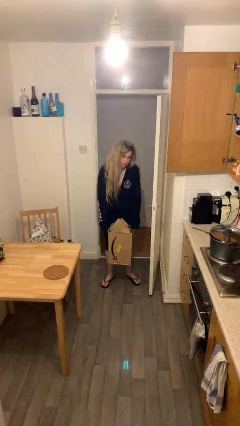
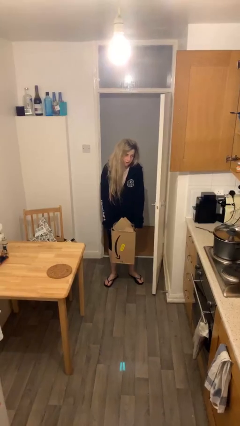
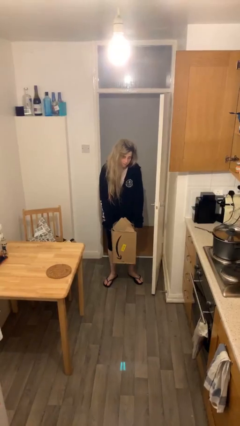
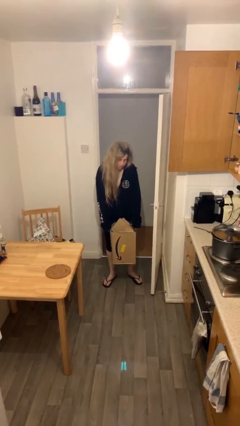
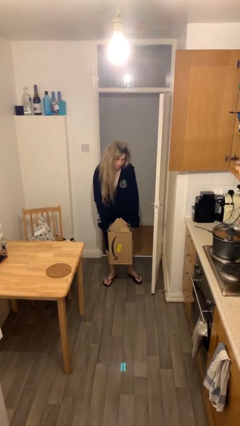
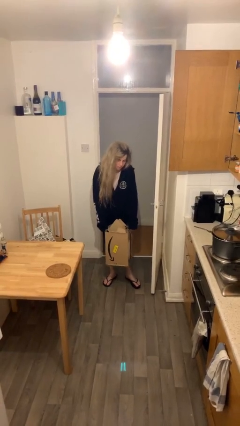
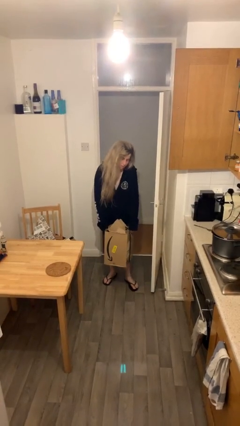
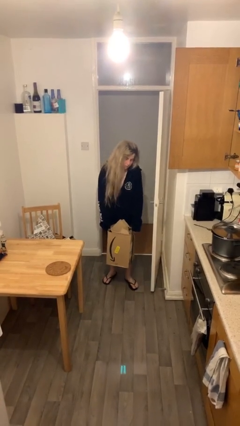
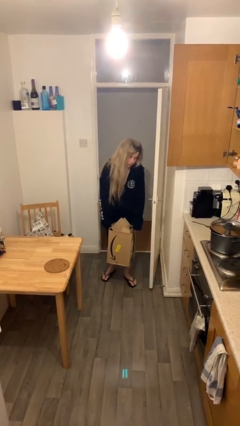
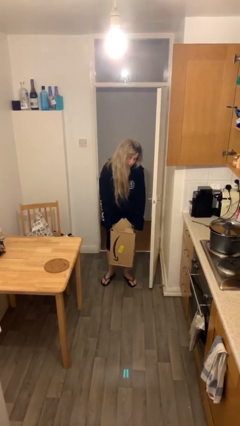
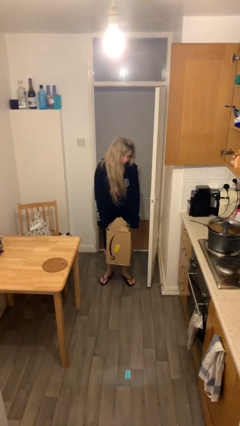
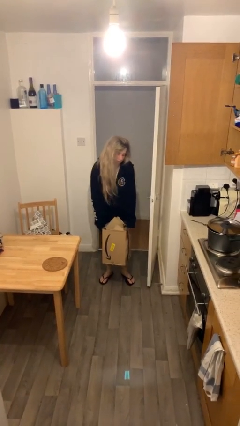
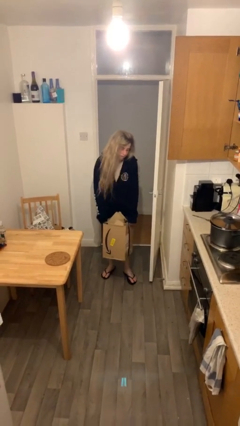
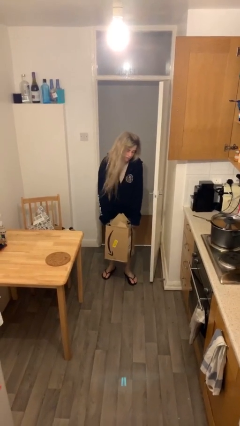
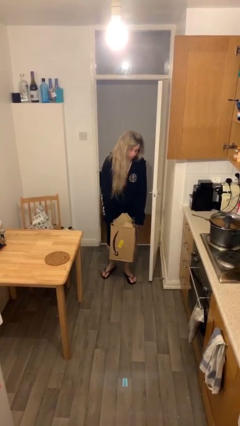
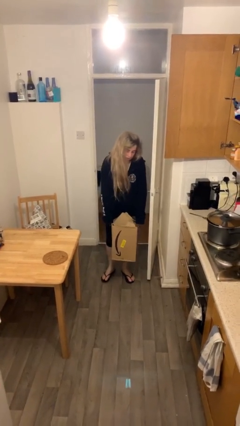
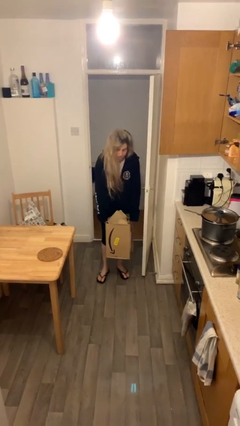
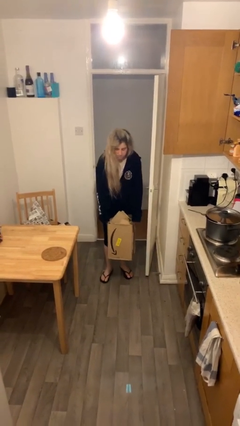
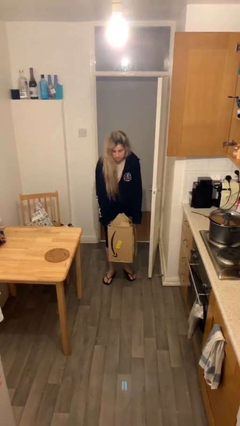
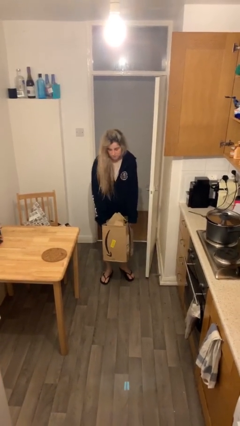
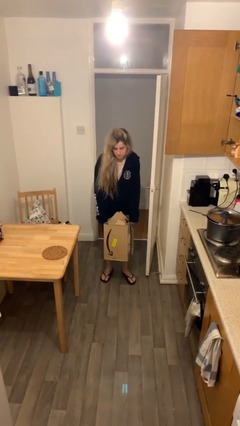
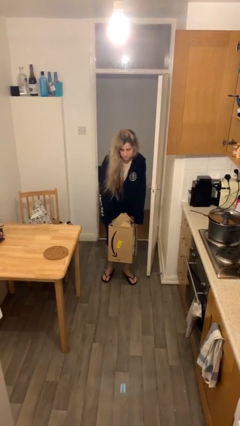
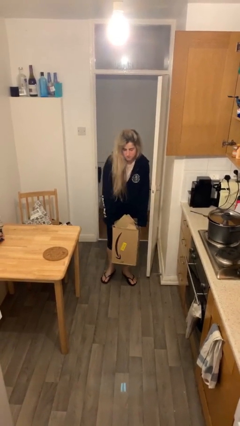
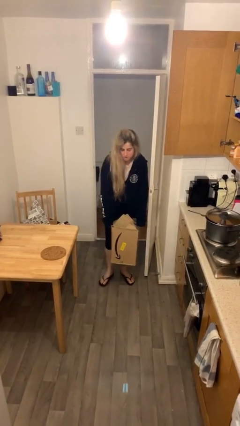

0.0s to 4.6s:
person carries heavy object

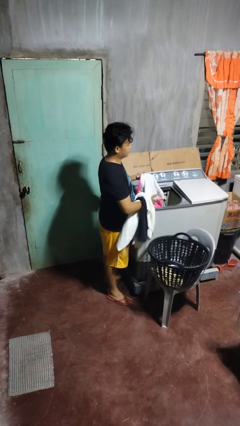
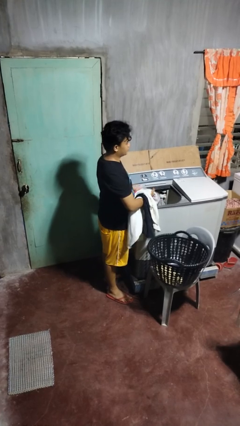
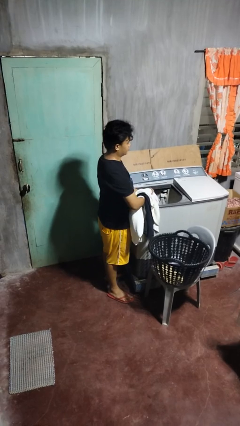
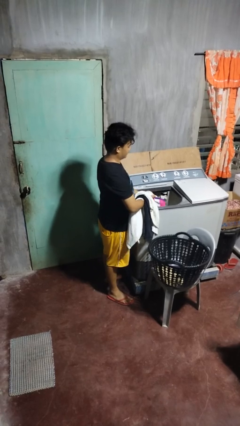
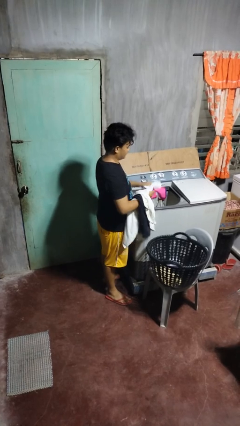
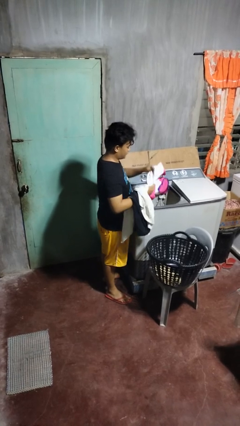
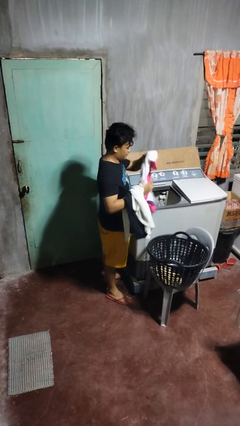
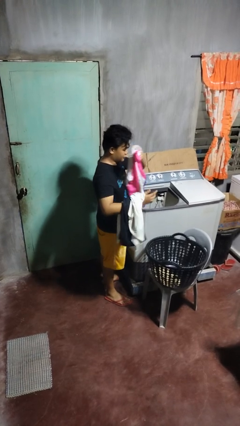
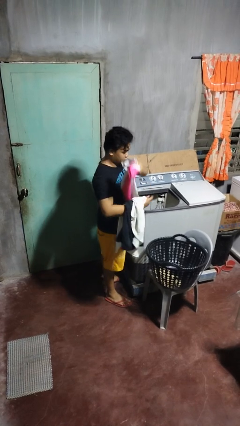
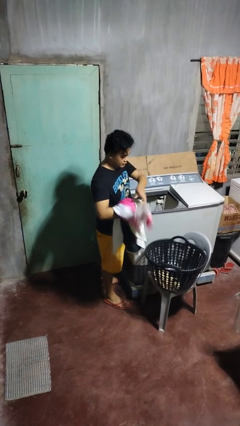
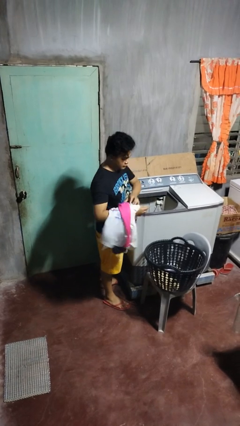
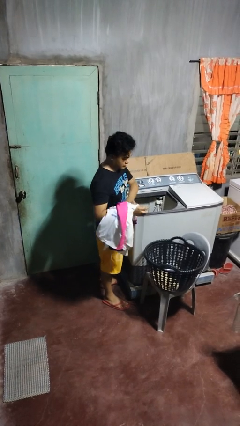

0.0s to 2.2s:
person loads clotheswasher

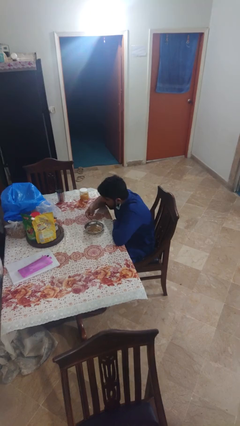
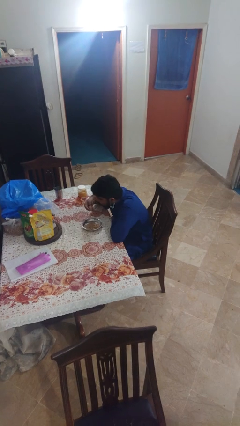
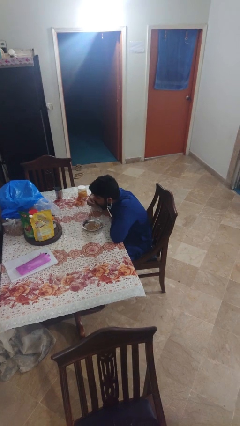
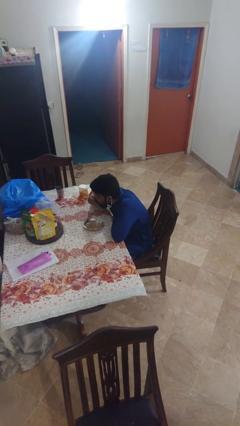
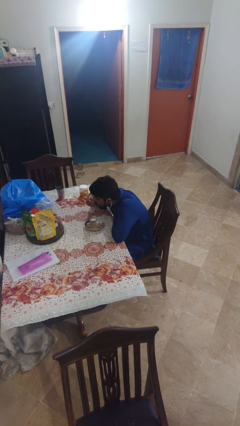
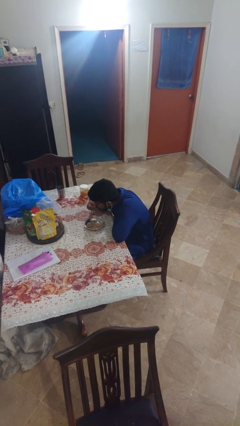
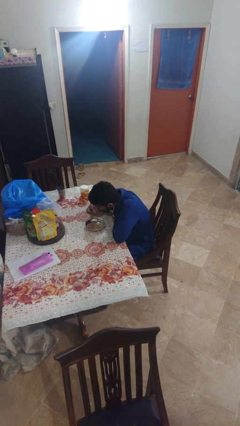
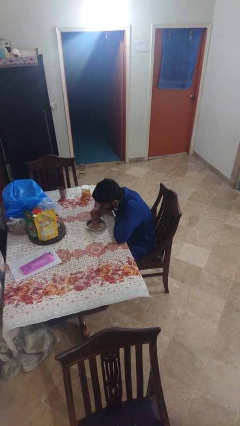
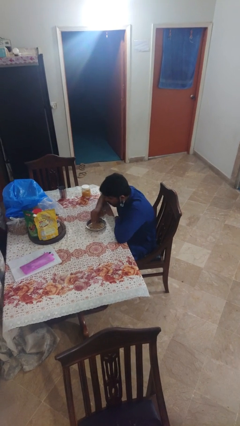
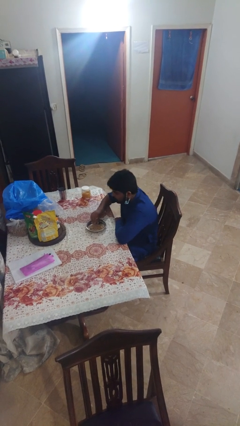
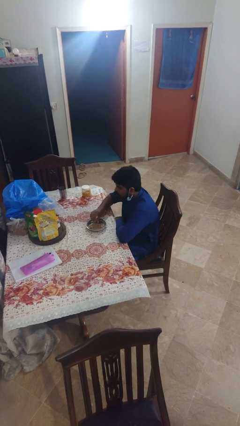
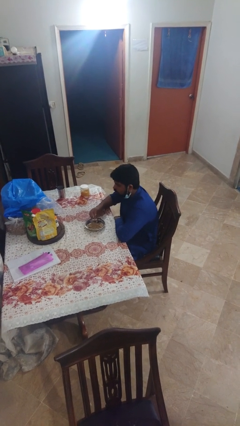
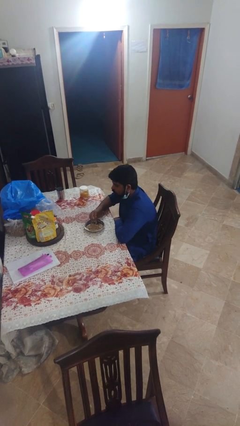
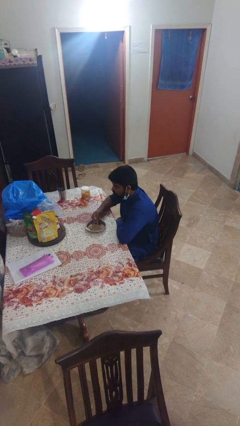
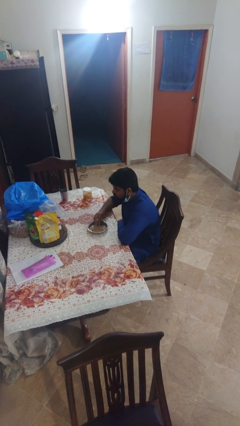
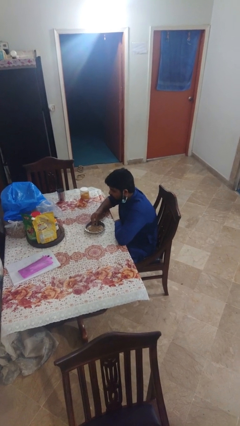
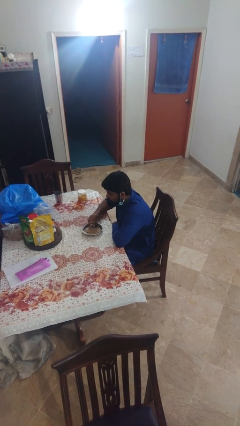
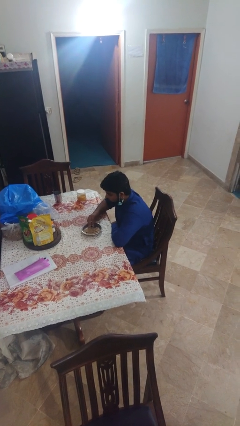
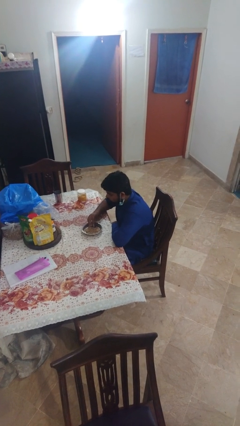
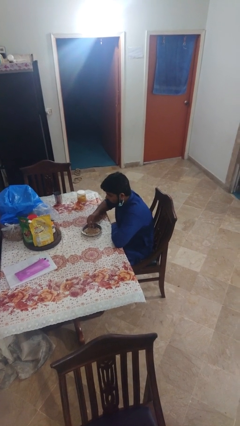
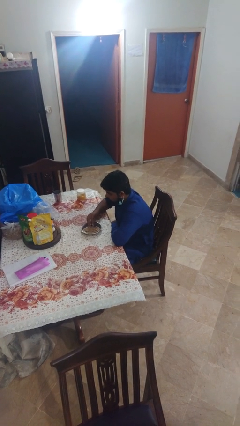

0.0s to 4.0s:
person eats with hands

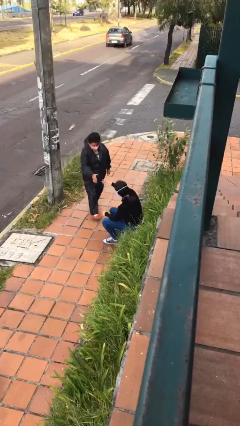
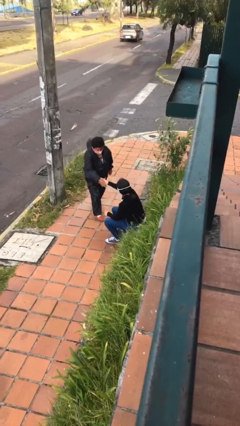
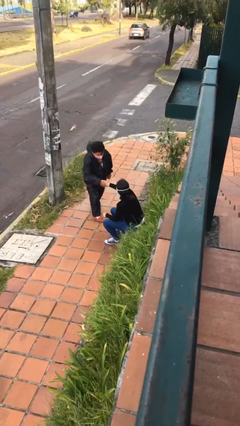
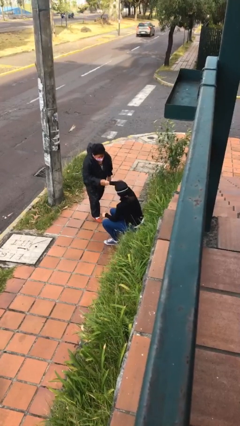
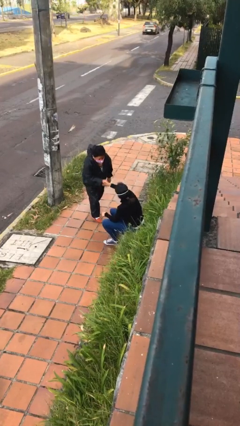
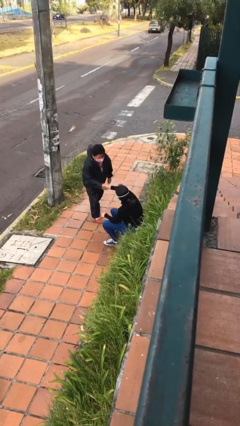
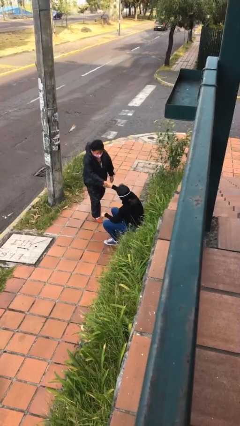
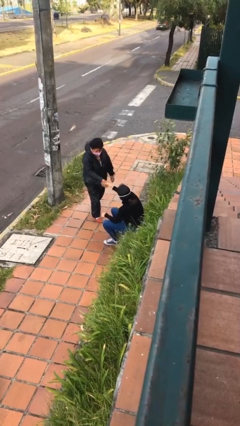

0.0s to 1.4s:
person shakes hand

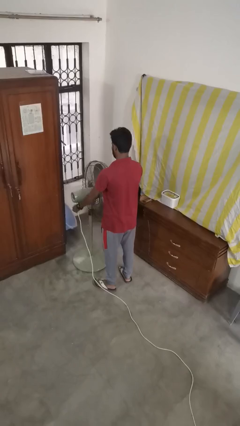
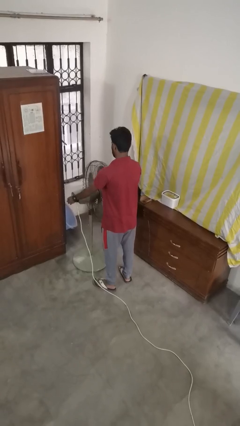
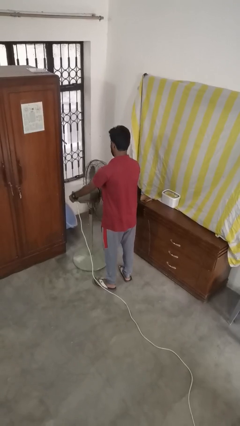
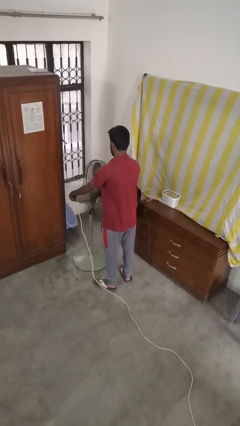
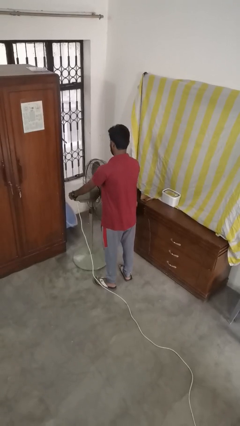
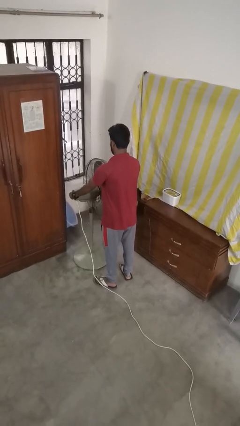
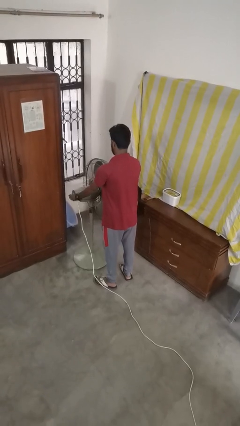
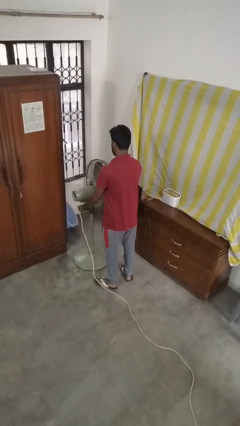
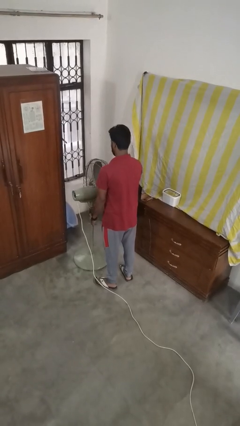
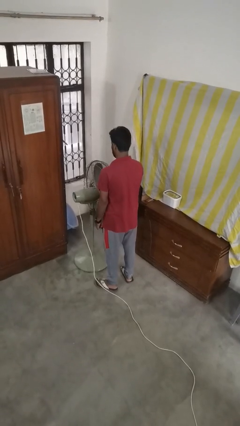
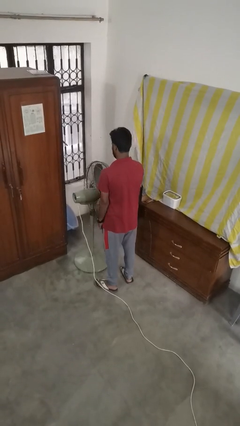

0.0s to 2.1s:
person turns off fan

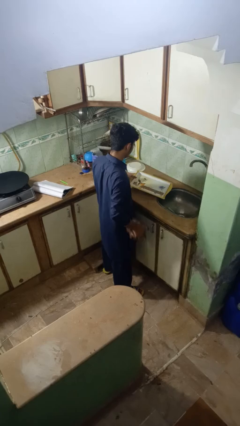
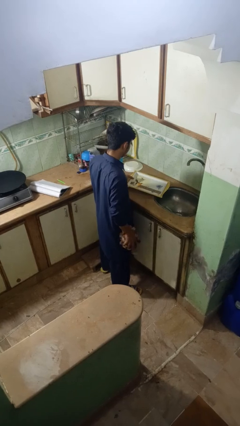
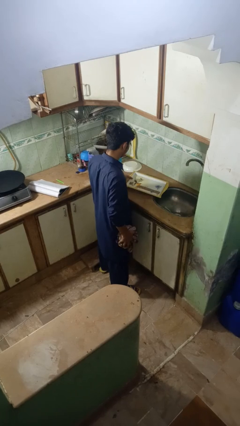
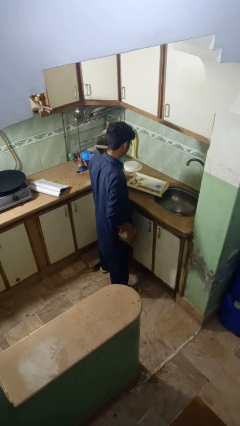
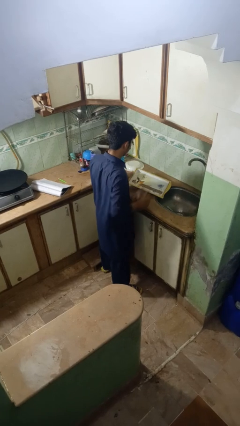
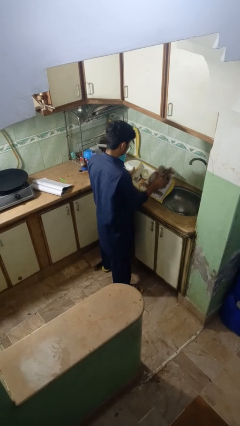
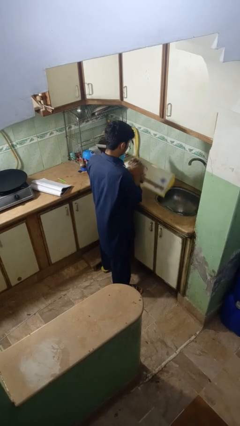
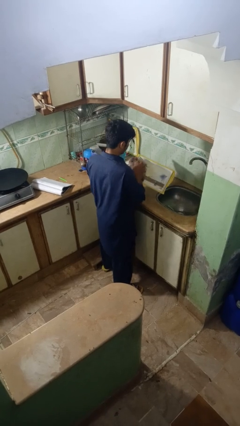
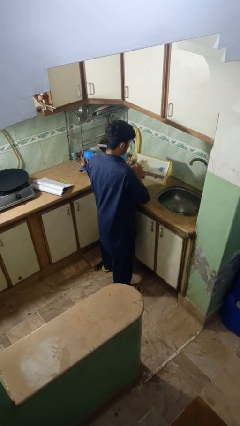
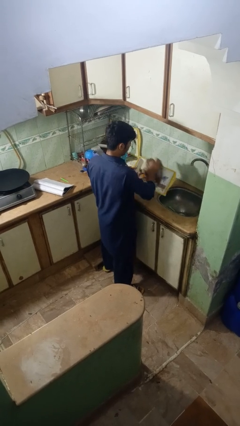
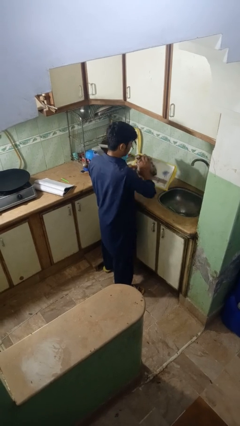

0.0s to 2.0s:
person dries dish

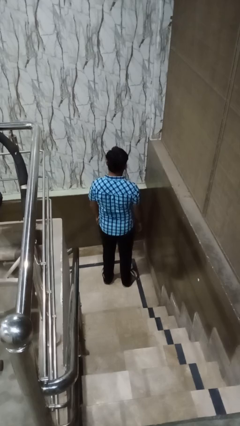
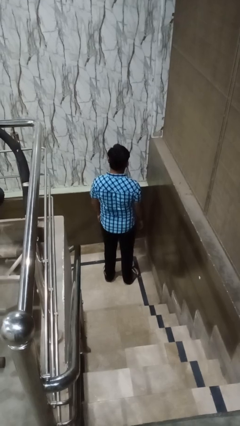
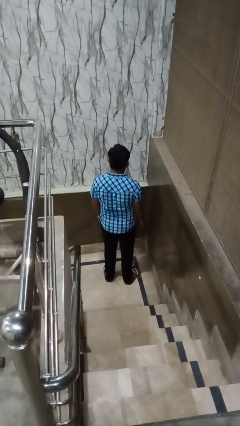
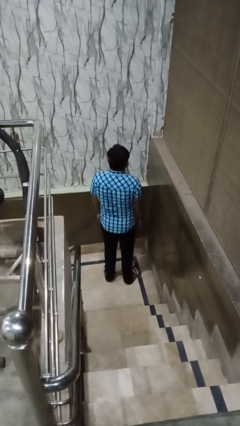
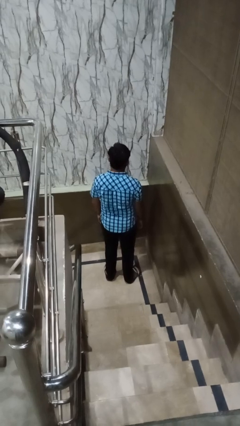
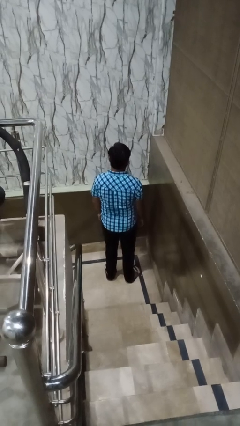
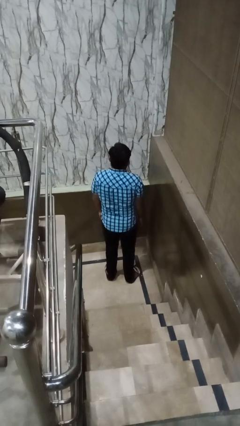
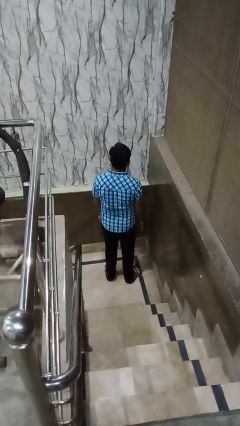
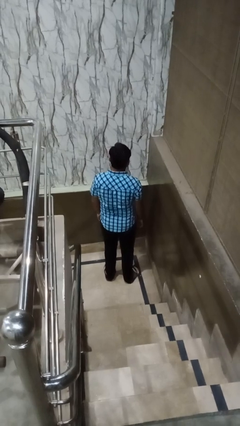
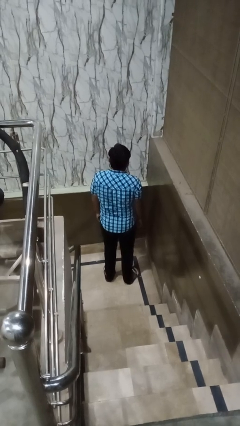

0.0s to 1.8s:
person shrugs
